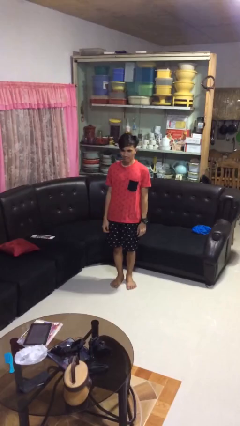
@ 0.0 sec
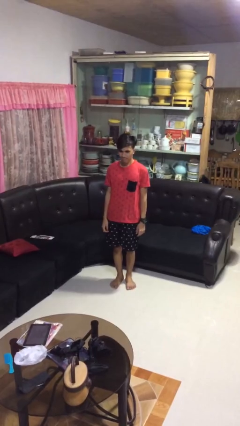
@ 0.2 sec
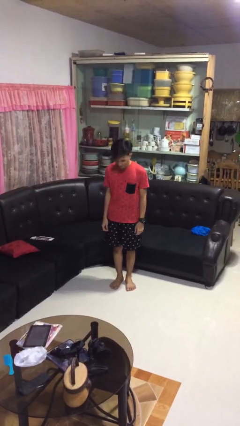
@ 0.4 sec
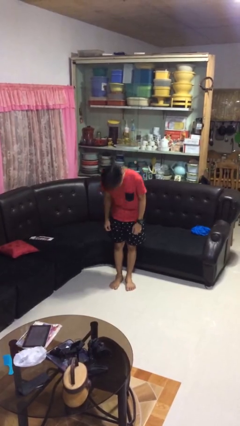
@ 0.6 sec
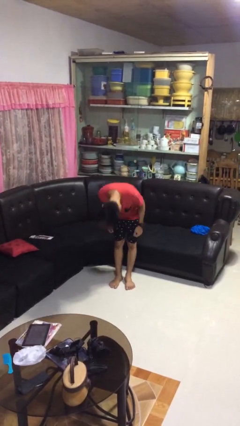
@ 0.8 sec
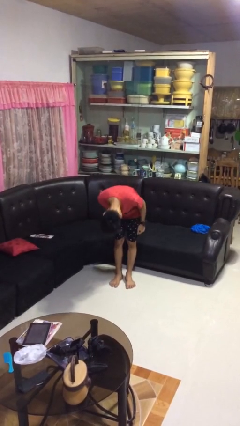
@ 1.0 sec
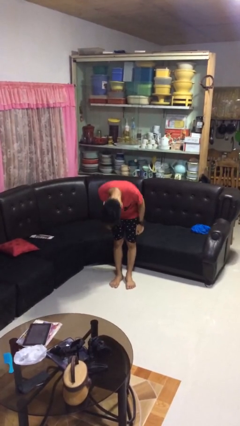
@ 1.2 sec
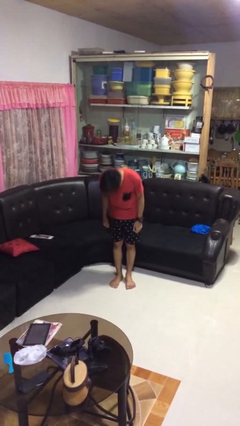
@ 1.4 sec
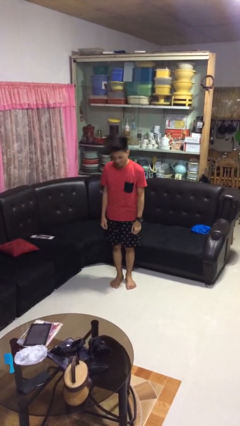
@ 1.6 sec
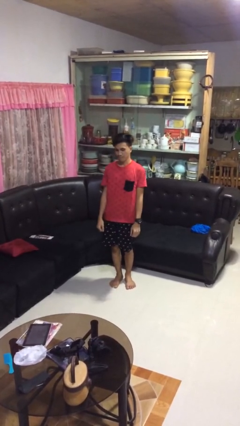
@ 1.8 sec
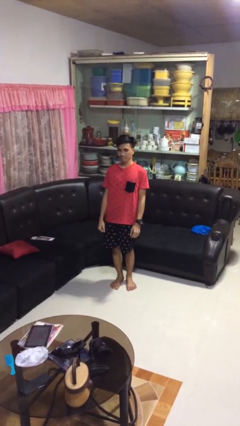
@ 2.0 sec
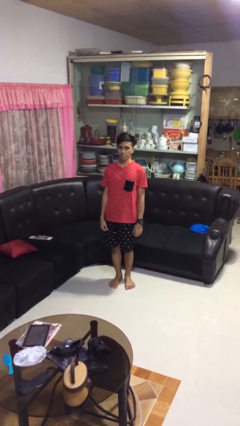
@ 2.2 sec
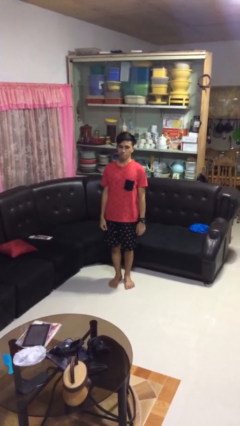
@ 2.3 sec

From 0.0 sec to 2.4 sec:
person bows

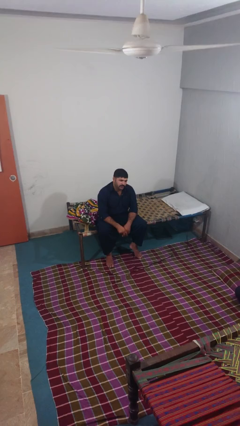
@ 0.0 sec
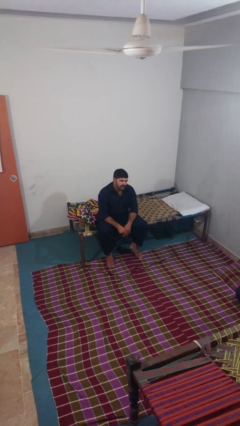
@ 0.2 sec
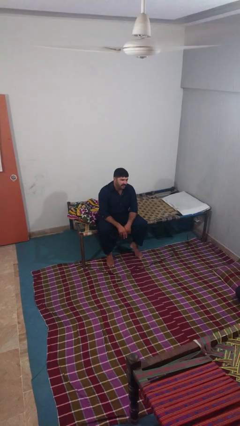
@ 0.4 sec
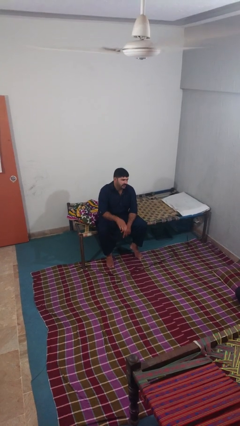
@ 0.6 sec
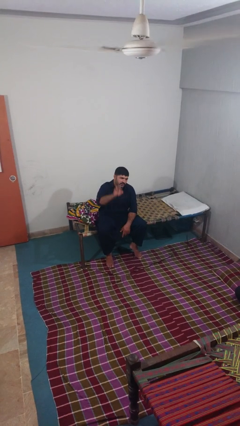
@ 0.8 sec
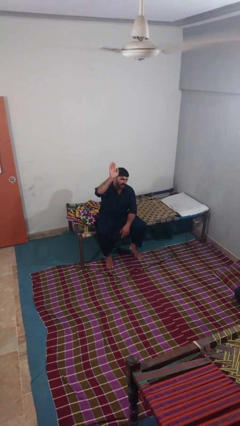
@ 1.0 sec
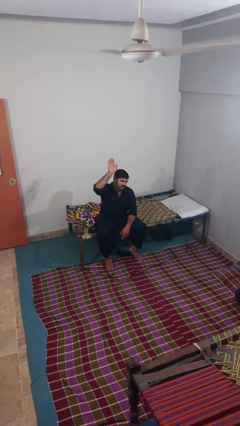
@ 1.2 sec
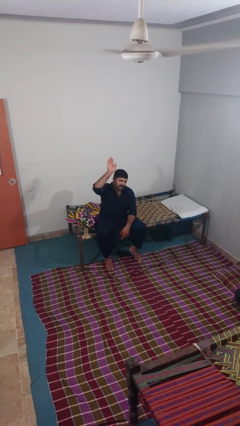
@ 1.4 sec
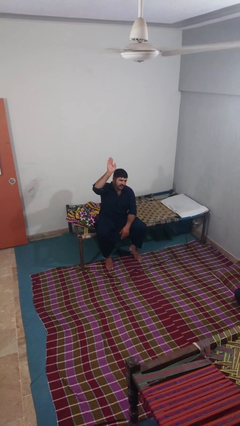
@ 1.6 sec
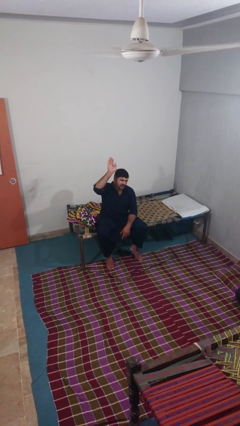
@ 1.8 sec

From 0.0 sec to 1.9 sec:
person gestures swipe up

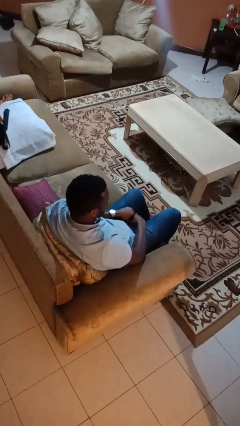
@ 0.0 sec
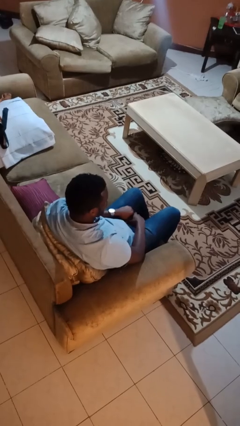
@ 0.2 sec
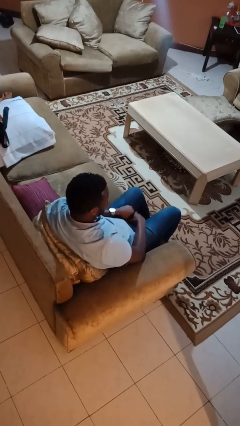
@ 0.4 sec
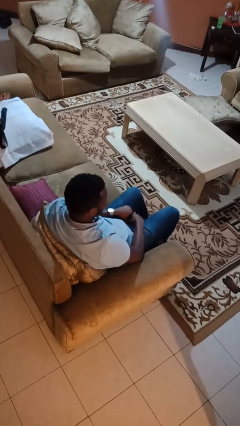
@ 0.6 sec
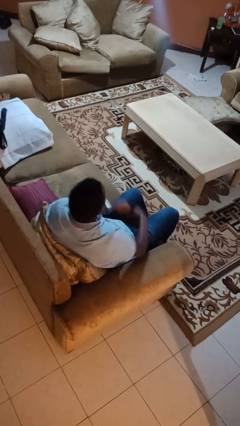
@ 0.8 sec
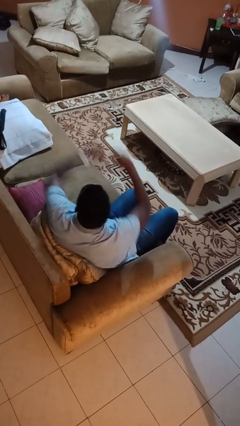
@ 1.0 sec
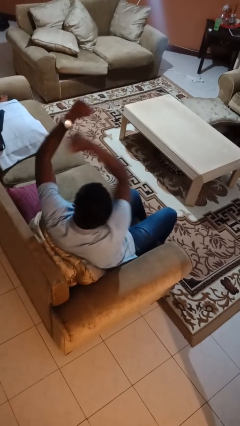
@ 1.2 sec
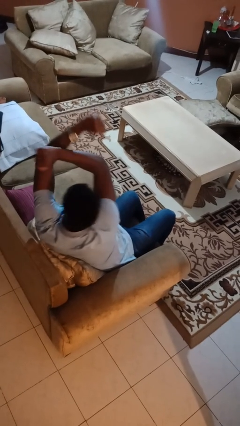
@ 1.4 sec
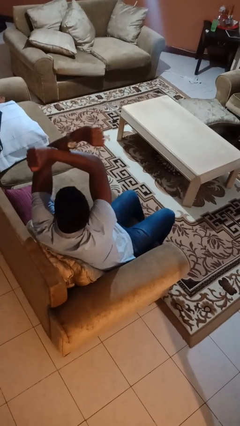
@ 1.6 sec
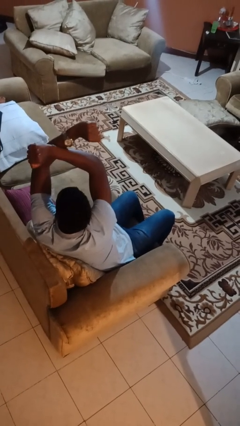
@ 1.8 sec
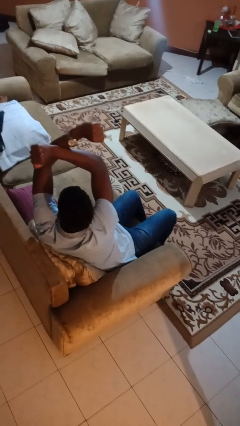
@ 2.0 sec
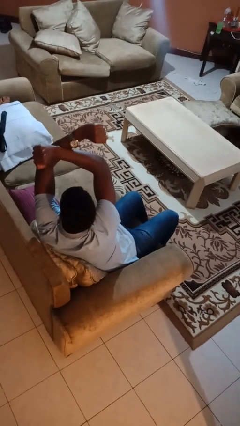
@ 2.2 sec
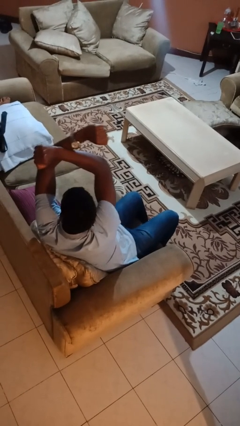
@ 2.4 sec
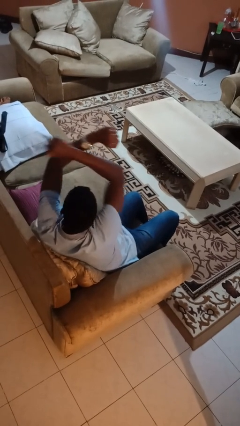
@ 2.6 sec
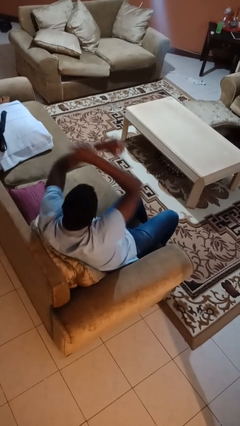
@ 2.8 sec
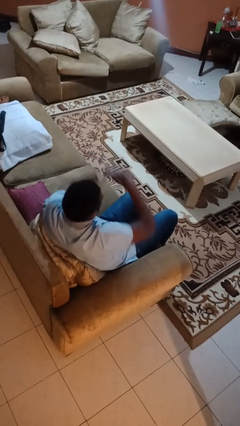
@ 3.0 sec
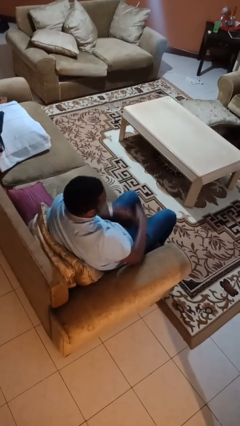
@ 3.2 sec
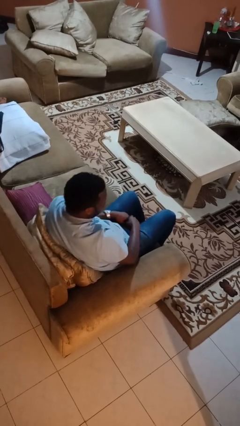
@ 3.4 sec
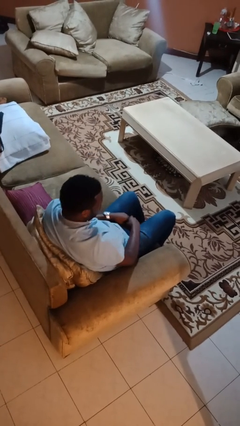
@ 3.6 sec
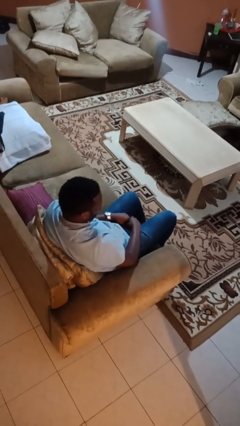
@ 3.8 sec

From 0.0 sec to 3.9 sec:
person gestures arms x

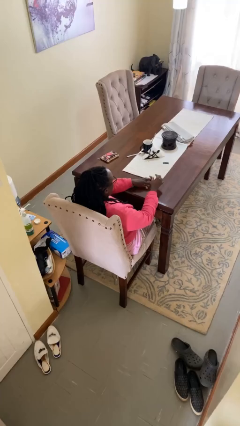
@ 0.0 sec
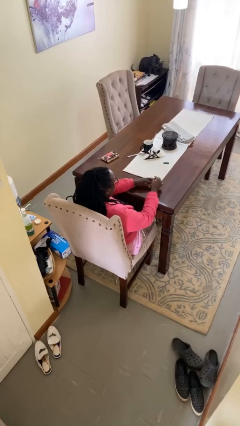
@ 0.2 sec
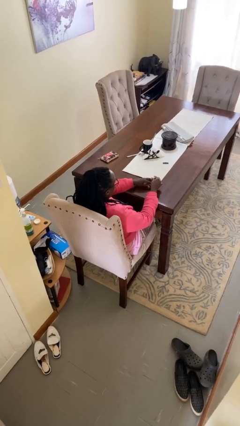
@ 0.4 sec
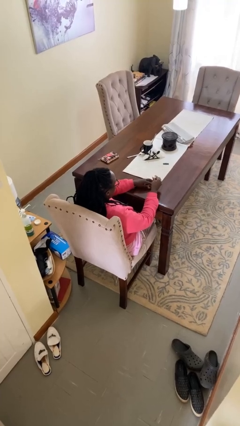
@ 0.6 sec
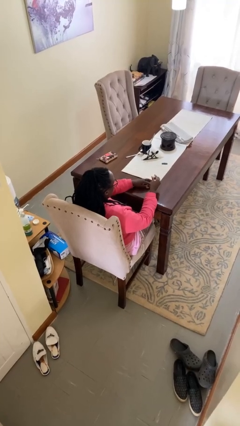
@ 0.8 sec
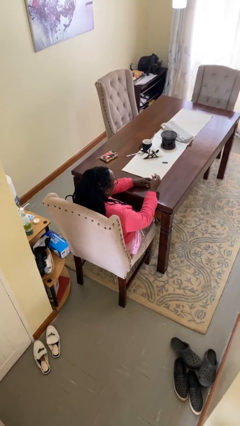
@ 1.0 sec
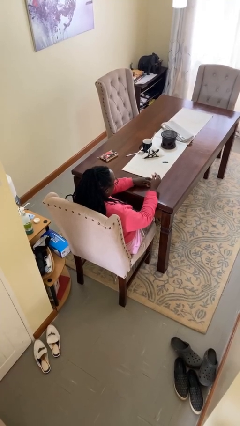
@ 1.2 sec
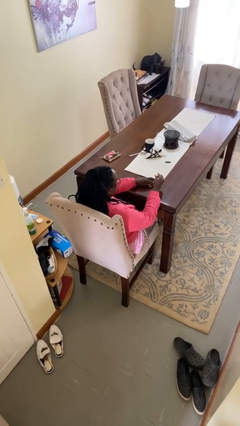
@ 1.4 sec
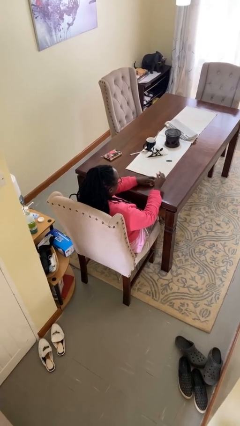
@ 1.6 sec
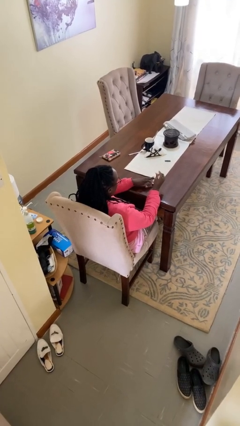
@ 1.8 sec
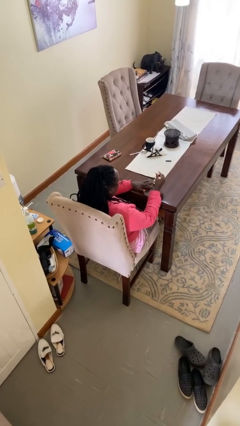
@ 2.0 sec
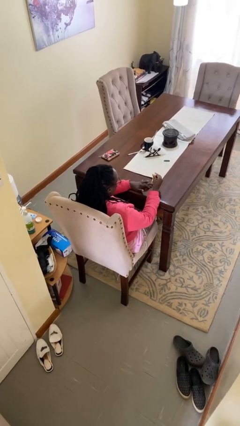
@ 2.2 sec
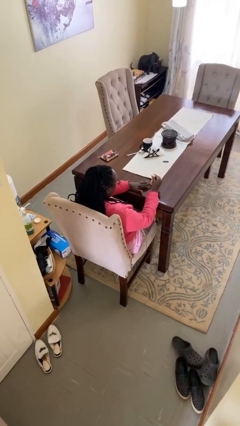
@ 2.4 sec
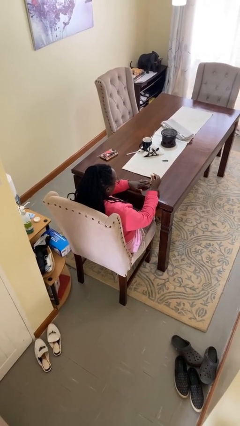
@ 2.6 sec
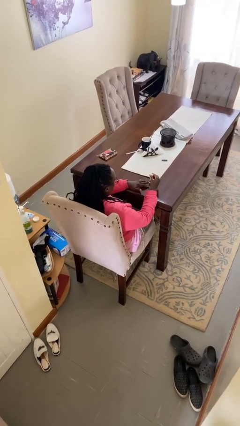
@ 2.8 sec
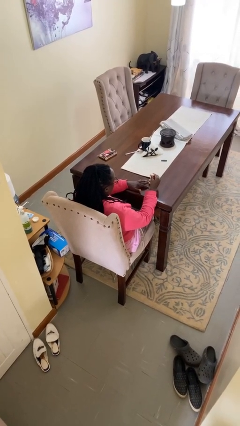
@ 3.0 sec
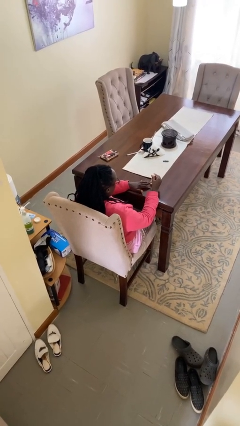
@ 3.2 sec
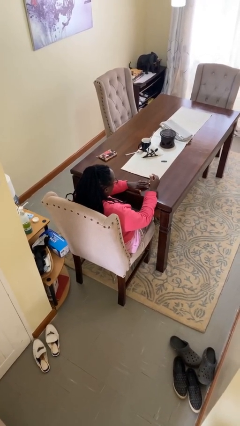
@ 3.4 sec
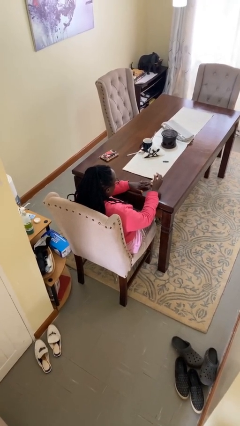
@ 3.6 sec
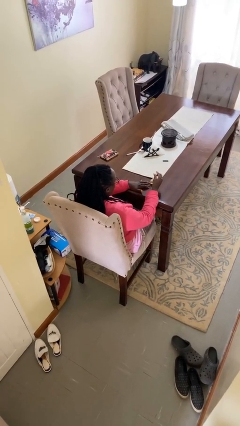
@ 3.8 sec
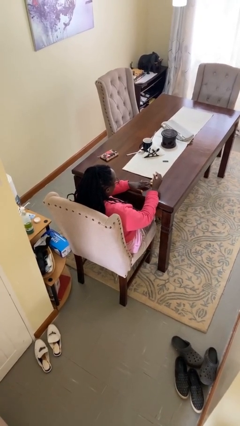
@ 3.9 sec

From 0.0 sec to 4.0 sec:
person paints fingernails

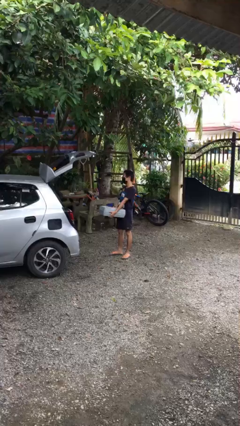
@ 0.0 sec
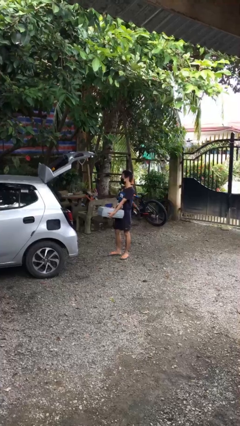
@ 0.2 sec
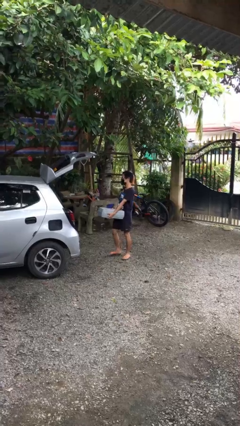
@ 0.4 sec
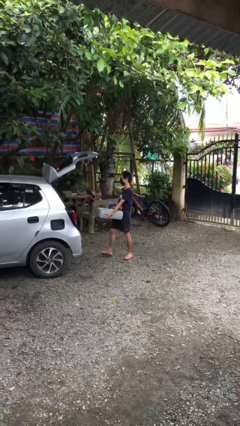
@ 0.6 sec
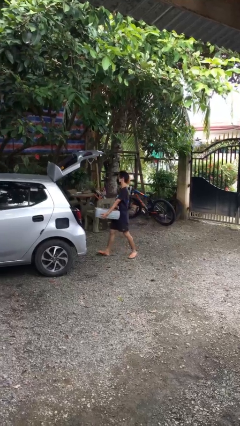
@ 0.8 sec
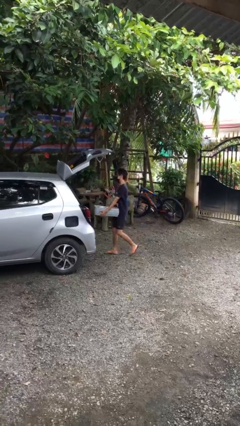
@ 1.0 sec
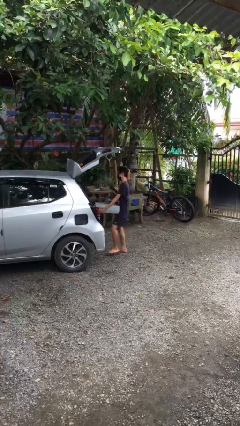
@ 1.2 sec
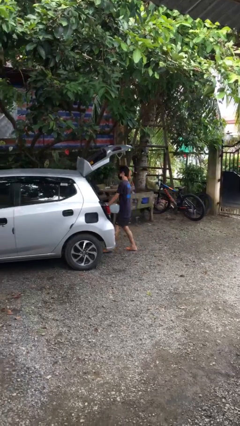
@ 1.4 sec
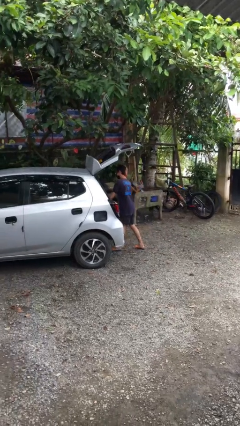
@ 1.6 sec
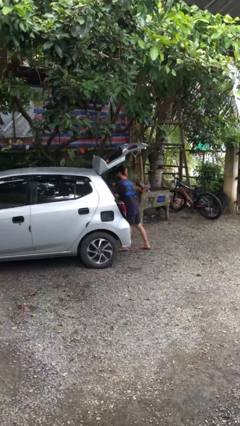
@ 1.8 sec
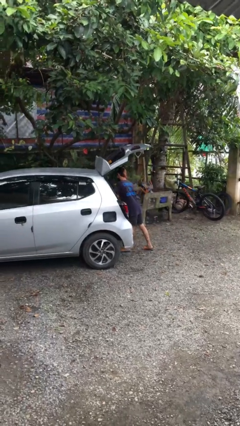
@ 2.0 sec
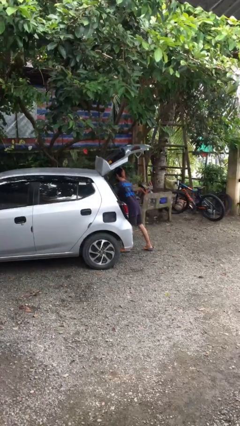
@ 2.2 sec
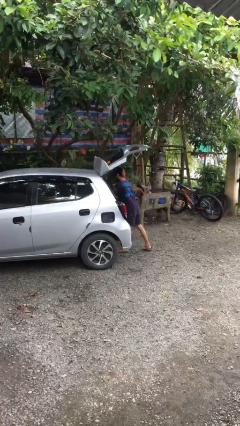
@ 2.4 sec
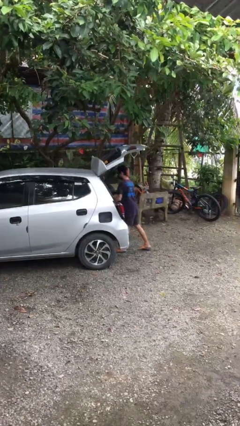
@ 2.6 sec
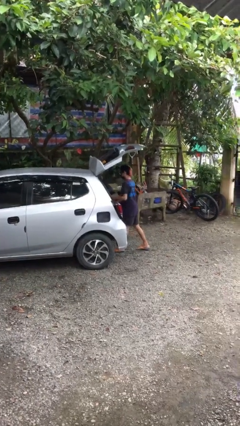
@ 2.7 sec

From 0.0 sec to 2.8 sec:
person loads car

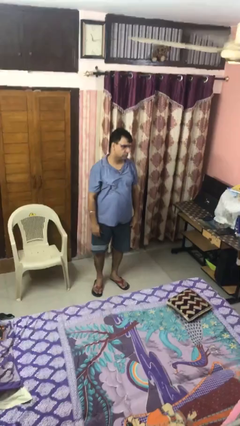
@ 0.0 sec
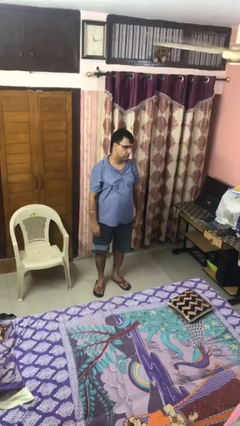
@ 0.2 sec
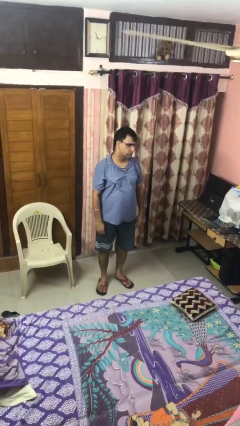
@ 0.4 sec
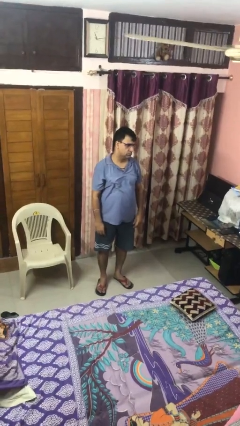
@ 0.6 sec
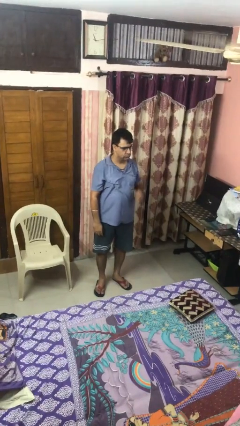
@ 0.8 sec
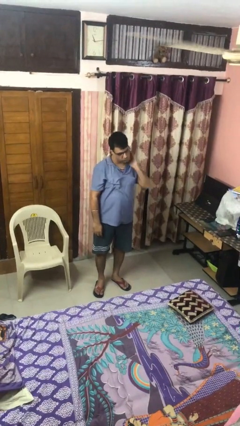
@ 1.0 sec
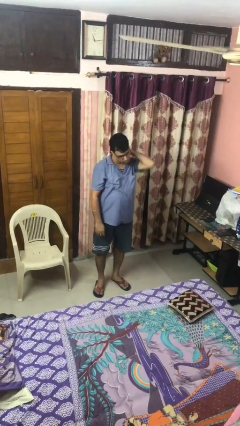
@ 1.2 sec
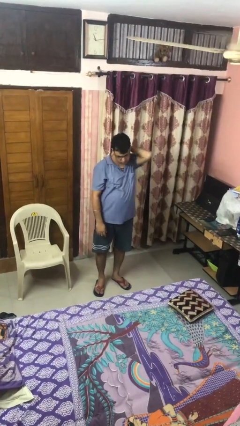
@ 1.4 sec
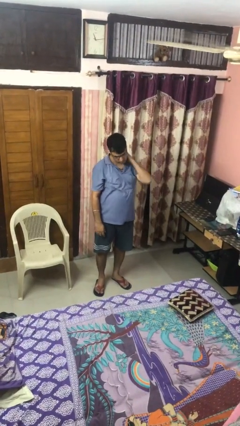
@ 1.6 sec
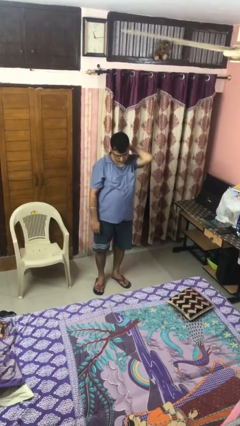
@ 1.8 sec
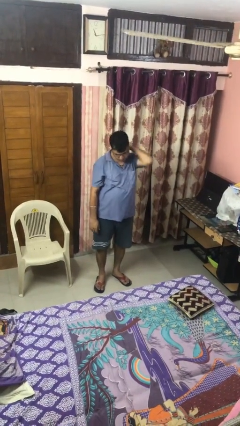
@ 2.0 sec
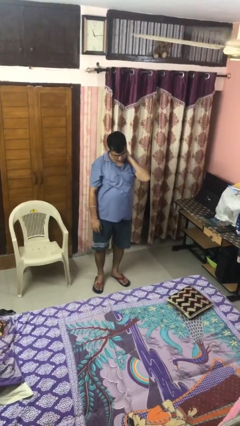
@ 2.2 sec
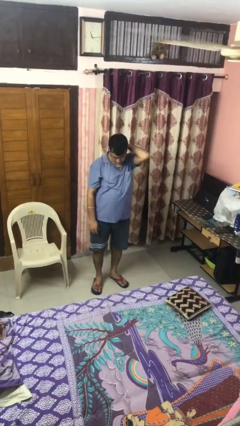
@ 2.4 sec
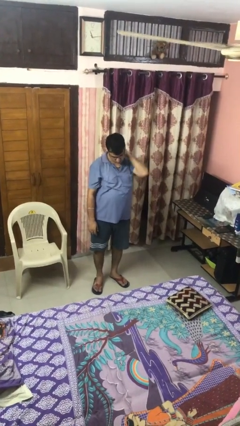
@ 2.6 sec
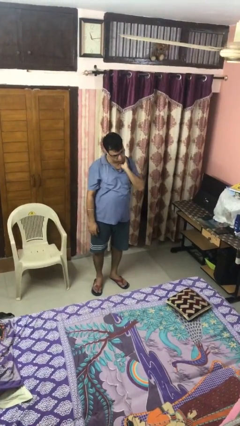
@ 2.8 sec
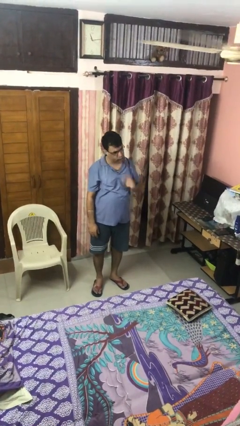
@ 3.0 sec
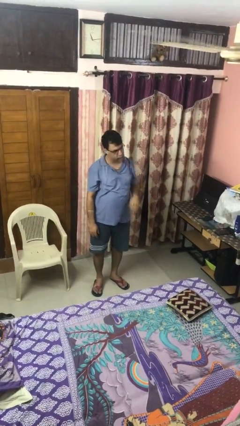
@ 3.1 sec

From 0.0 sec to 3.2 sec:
person rubs neck
